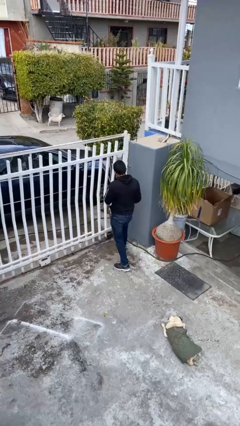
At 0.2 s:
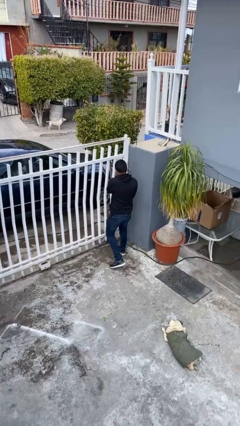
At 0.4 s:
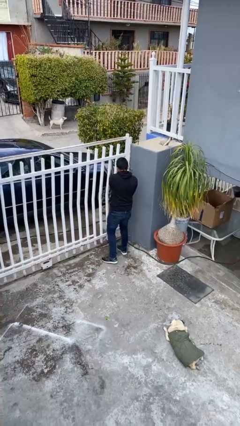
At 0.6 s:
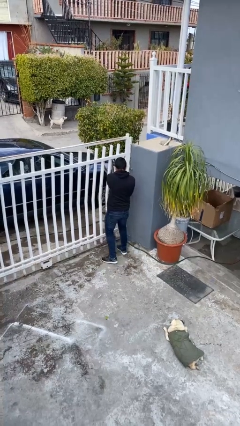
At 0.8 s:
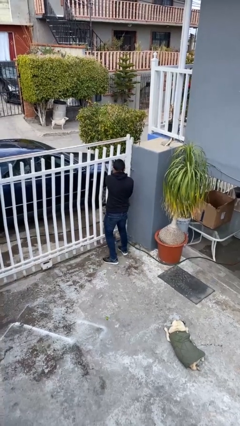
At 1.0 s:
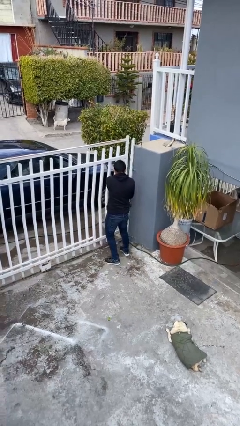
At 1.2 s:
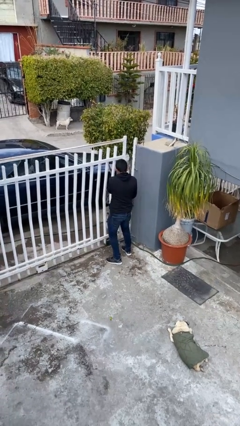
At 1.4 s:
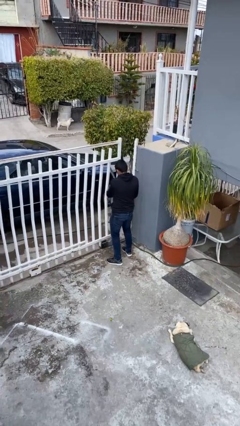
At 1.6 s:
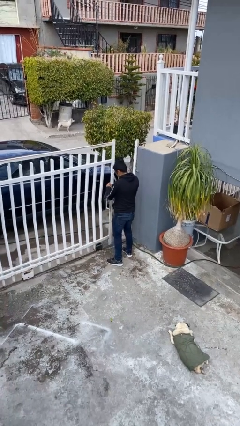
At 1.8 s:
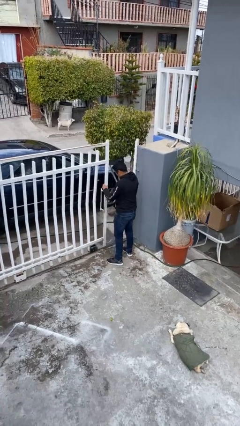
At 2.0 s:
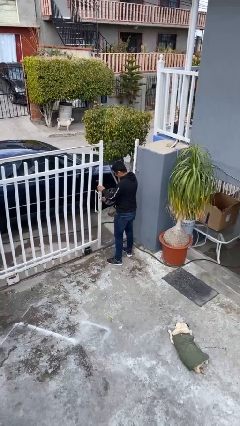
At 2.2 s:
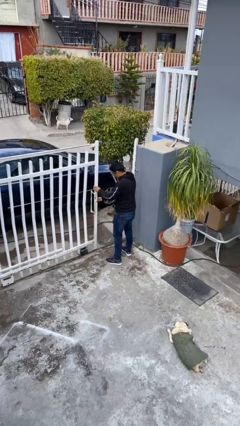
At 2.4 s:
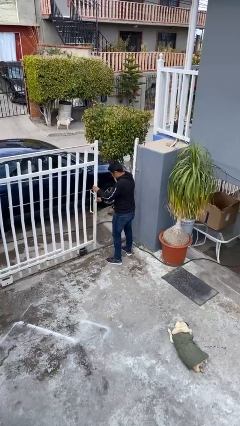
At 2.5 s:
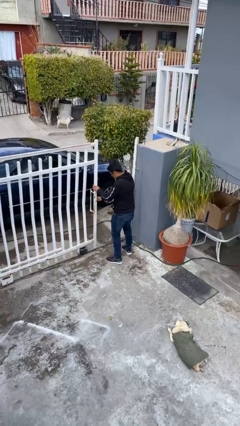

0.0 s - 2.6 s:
person opens facility door

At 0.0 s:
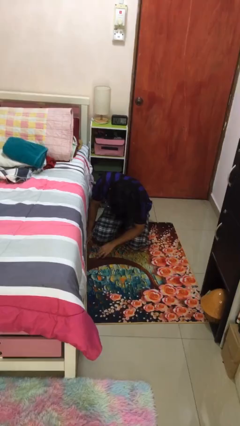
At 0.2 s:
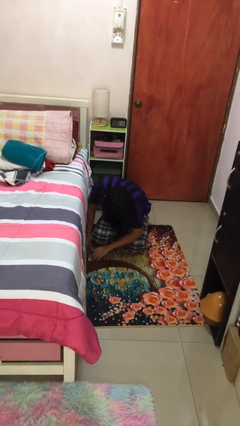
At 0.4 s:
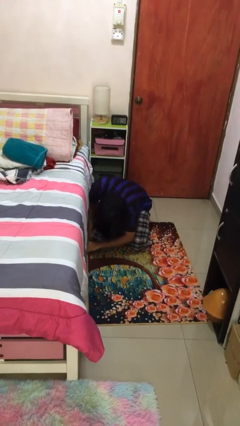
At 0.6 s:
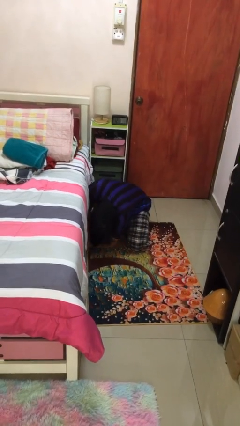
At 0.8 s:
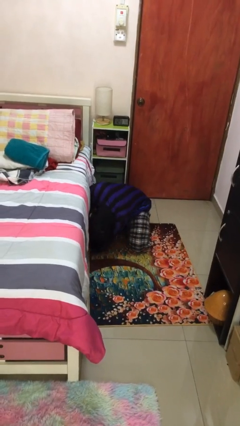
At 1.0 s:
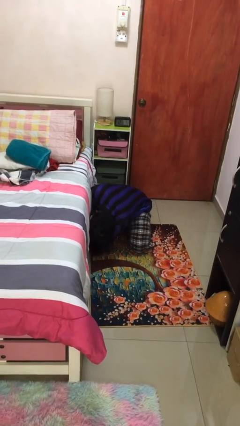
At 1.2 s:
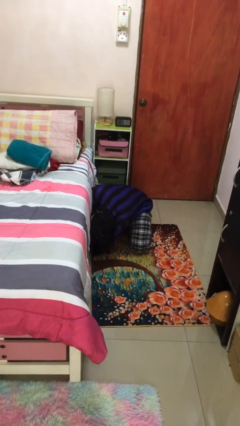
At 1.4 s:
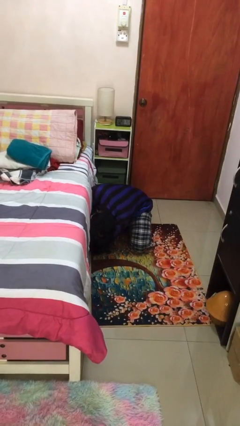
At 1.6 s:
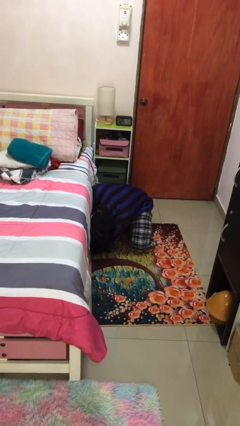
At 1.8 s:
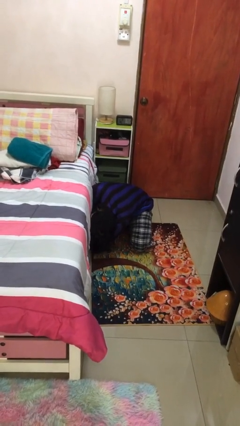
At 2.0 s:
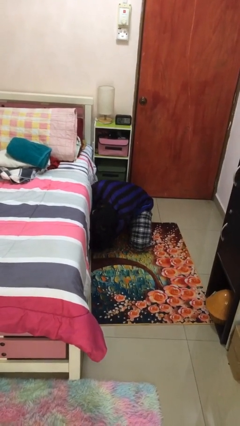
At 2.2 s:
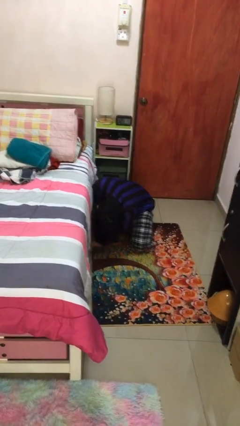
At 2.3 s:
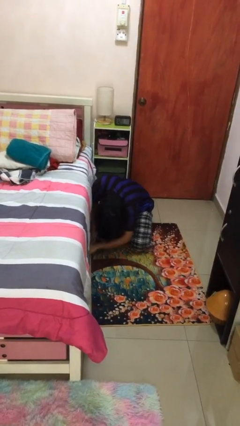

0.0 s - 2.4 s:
person searches under bed

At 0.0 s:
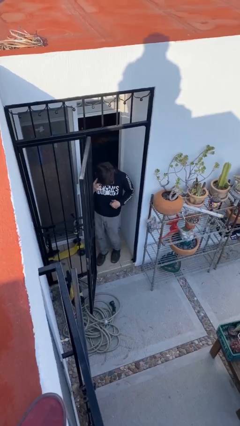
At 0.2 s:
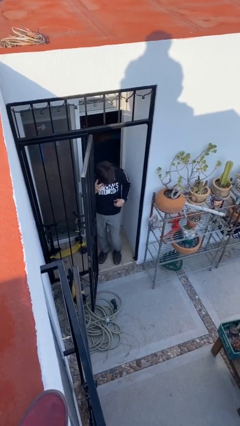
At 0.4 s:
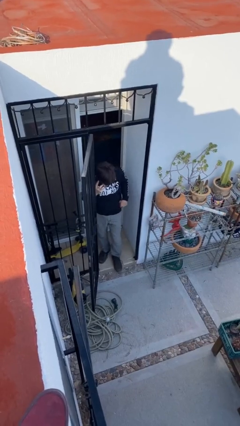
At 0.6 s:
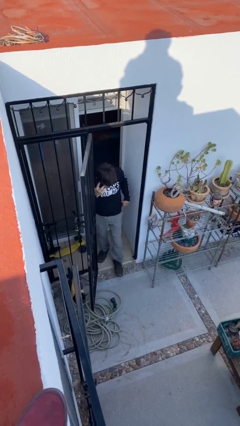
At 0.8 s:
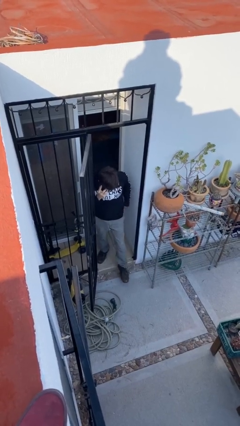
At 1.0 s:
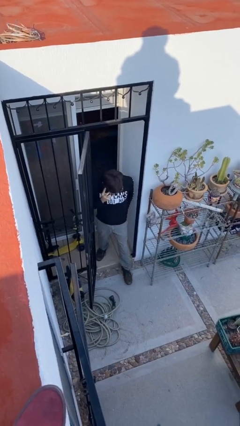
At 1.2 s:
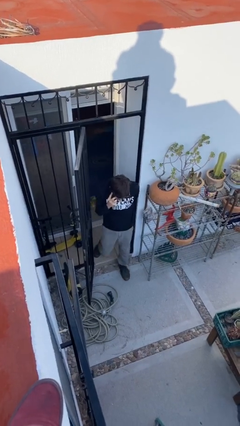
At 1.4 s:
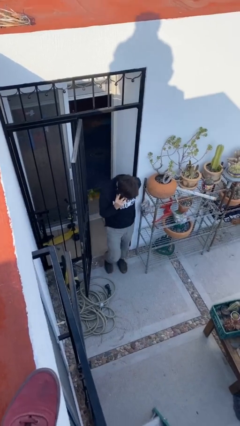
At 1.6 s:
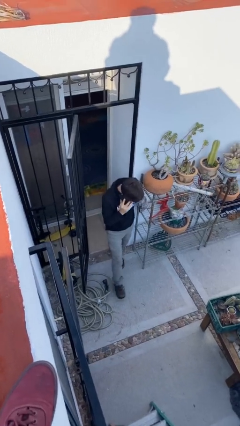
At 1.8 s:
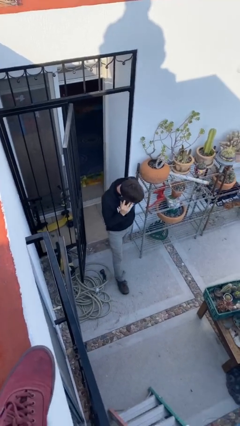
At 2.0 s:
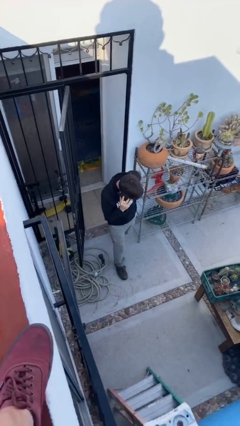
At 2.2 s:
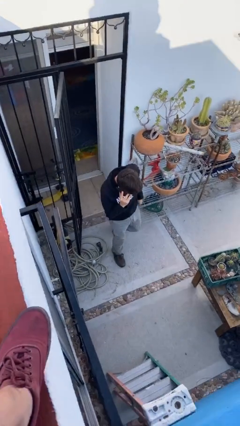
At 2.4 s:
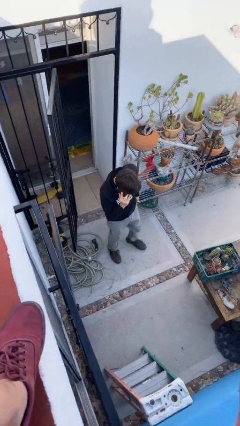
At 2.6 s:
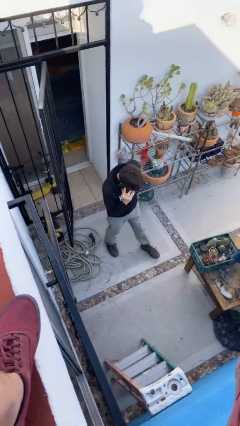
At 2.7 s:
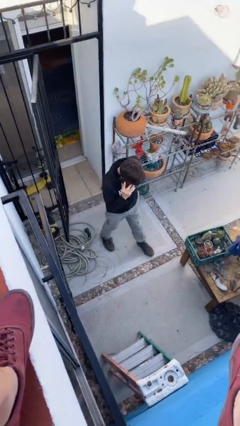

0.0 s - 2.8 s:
person enters scene through structure

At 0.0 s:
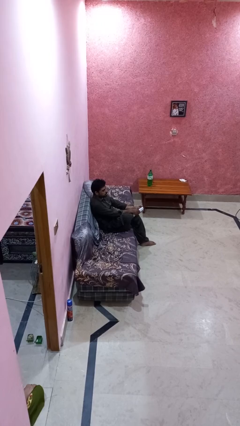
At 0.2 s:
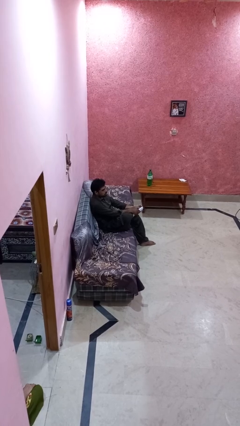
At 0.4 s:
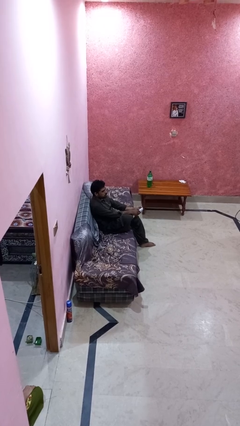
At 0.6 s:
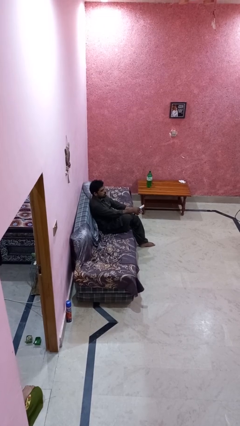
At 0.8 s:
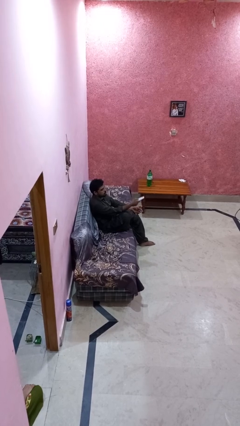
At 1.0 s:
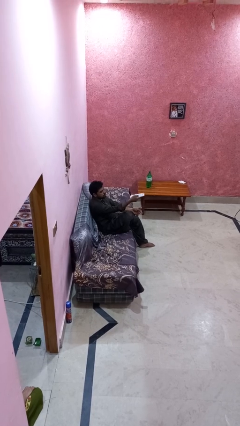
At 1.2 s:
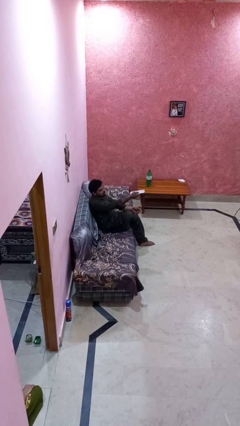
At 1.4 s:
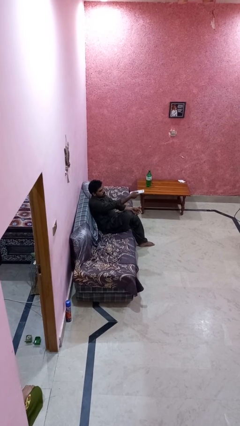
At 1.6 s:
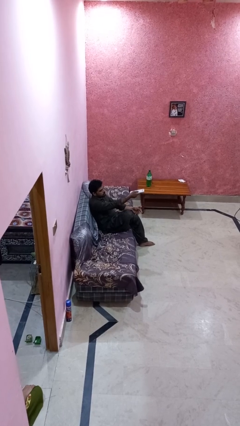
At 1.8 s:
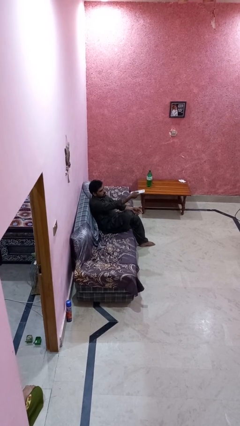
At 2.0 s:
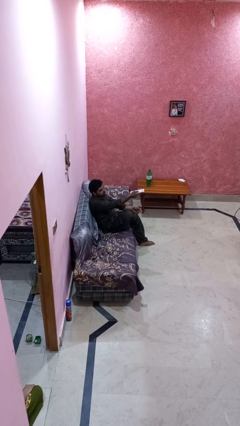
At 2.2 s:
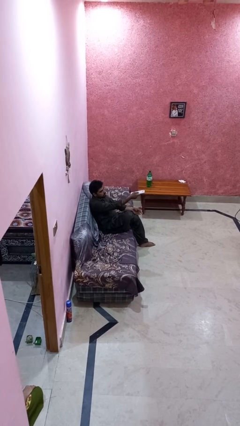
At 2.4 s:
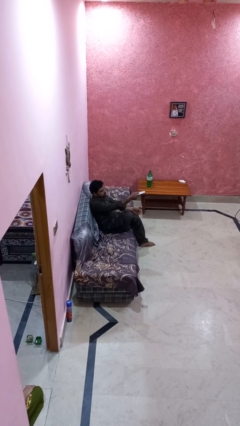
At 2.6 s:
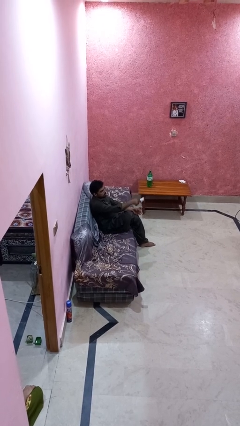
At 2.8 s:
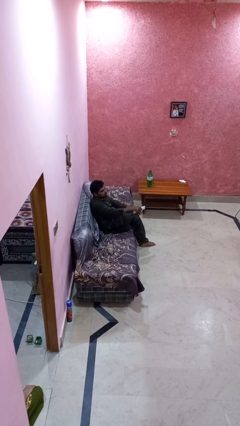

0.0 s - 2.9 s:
person uses television remote

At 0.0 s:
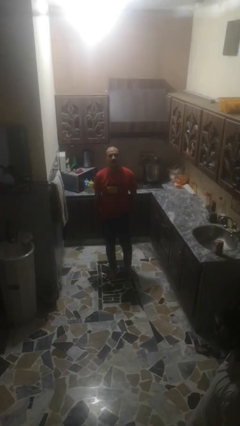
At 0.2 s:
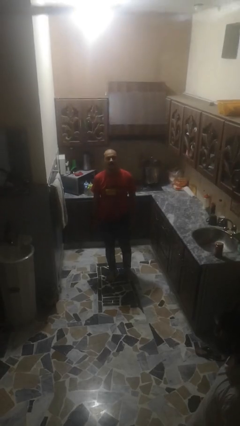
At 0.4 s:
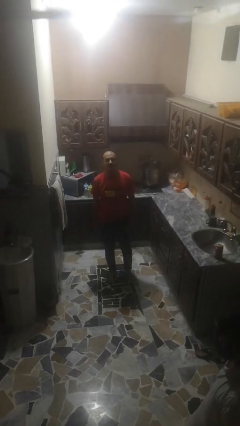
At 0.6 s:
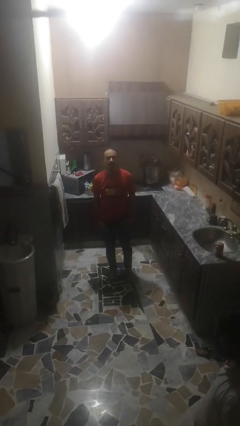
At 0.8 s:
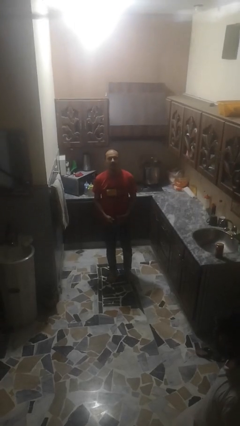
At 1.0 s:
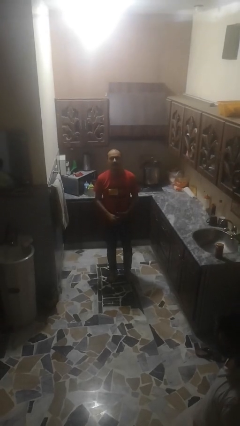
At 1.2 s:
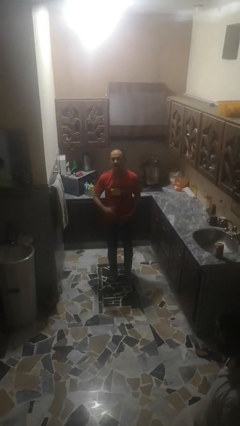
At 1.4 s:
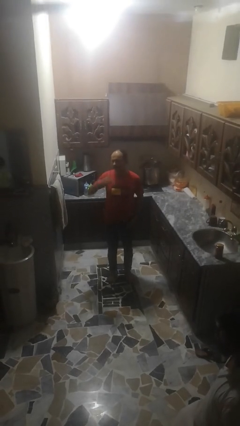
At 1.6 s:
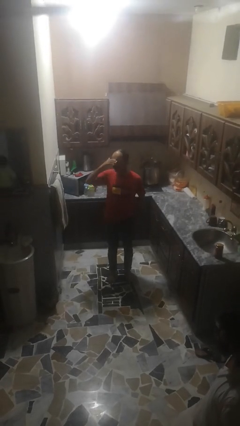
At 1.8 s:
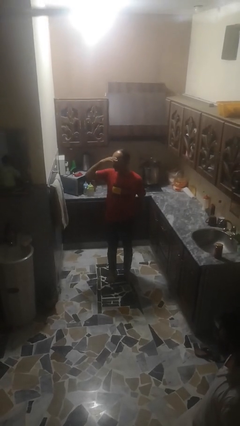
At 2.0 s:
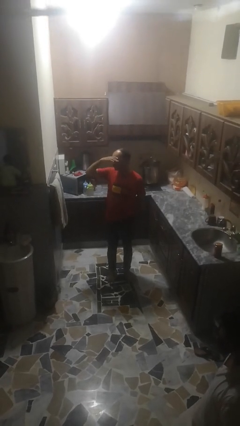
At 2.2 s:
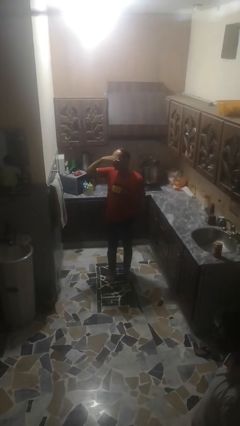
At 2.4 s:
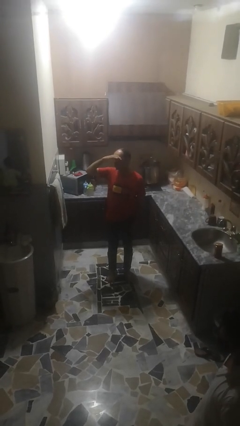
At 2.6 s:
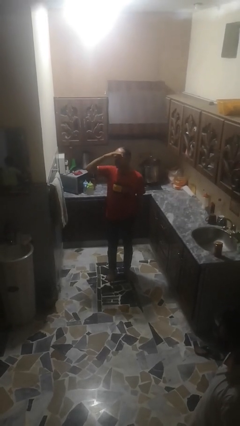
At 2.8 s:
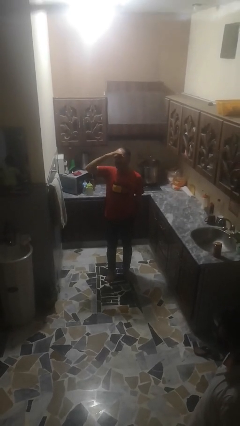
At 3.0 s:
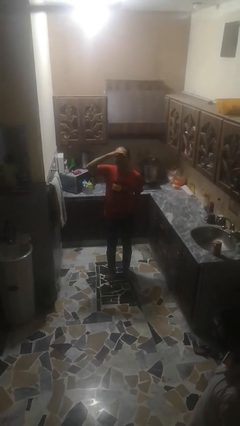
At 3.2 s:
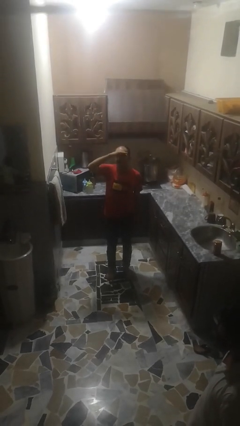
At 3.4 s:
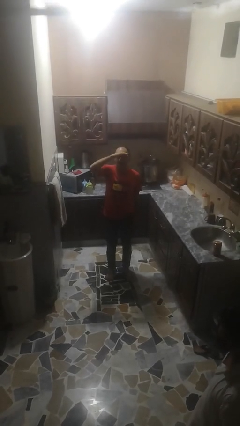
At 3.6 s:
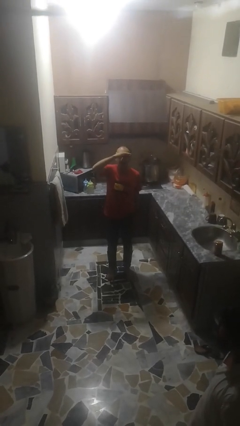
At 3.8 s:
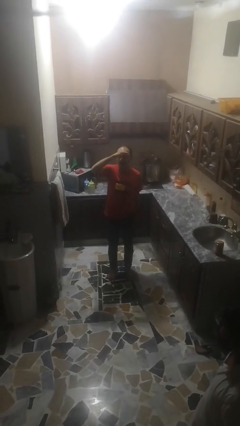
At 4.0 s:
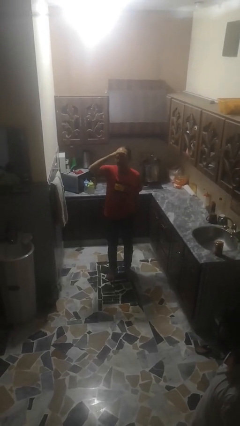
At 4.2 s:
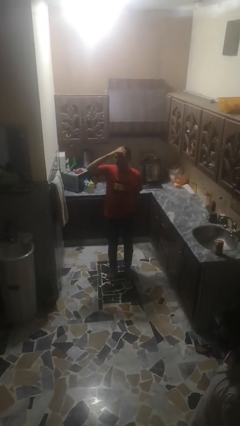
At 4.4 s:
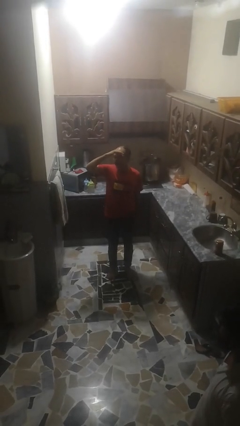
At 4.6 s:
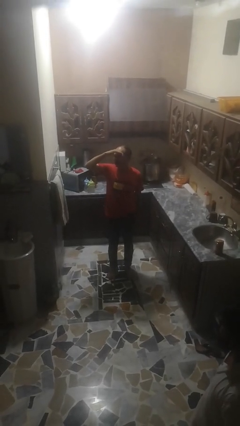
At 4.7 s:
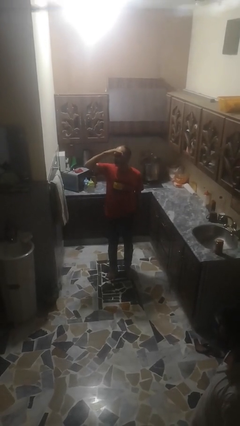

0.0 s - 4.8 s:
person shades eyes

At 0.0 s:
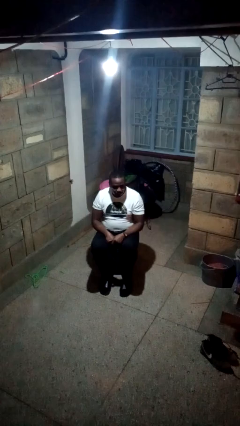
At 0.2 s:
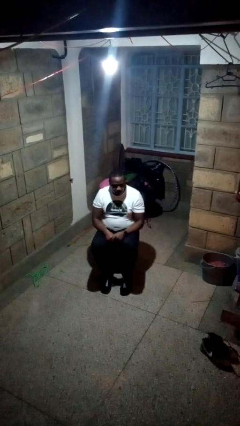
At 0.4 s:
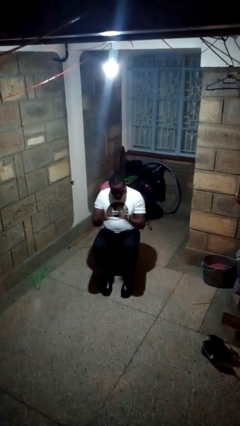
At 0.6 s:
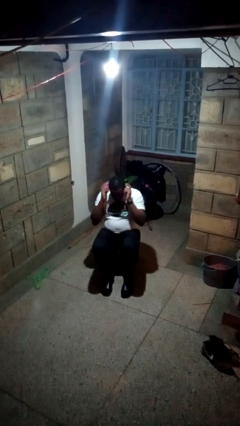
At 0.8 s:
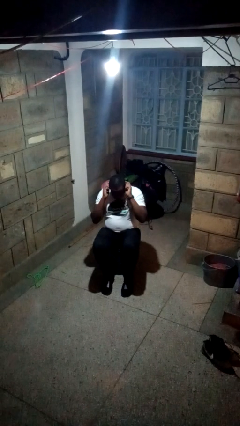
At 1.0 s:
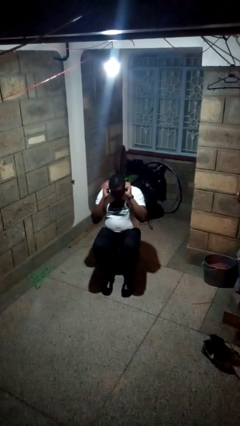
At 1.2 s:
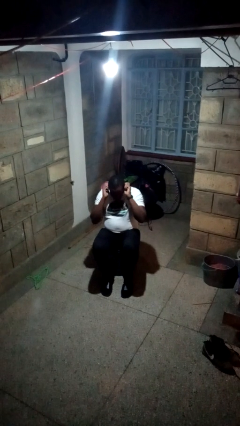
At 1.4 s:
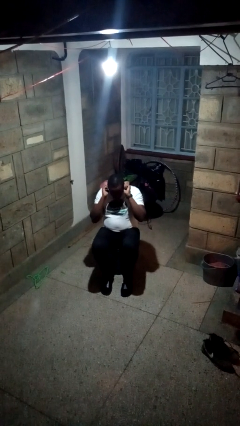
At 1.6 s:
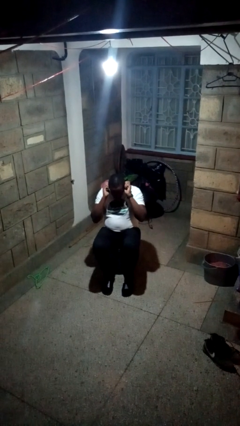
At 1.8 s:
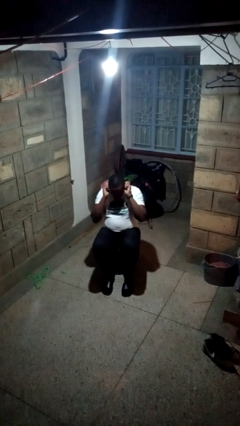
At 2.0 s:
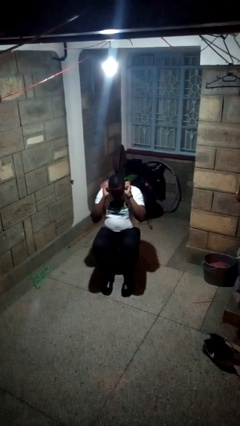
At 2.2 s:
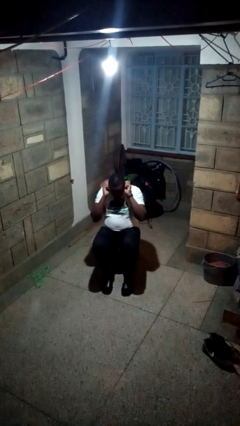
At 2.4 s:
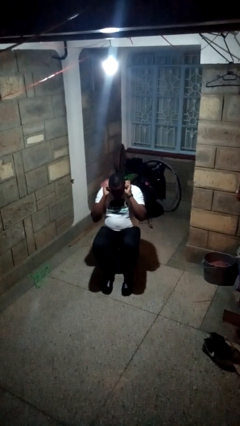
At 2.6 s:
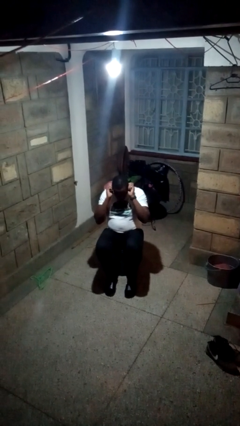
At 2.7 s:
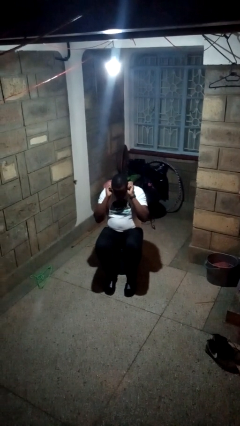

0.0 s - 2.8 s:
person touches earlobe
